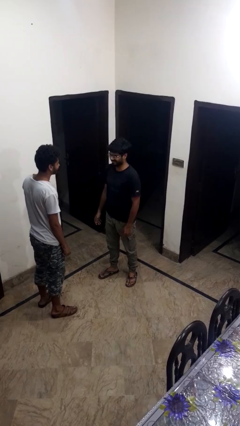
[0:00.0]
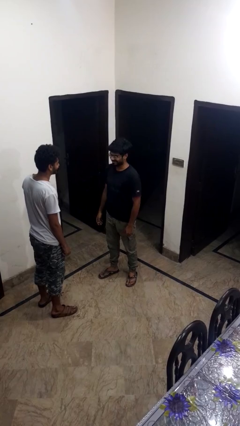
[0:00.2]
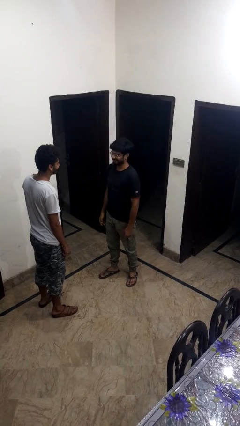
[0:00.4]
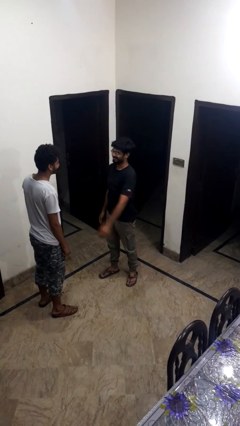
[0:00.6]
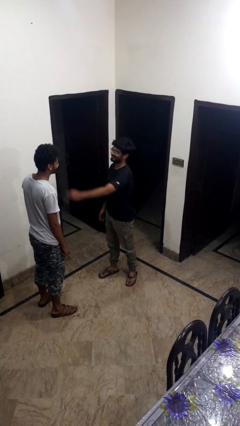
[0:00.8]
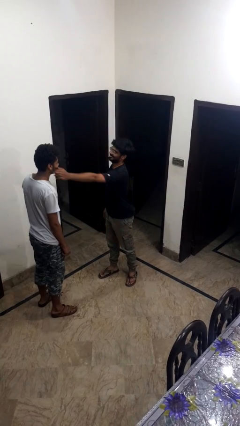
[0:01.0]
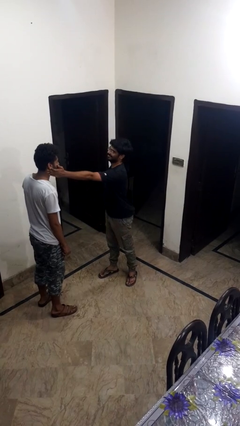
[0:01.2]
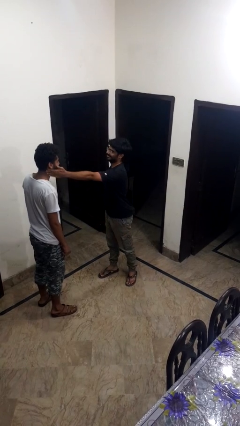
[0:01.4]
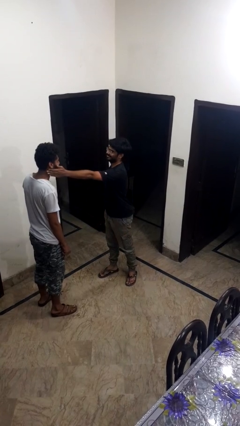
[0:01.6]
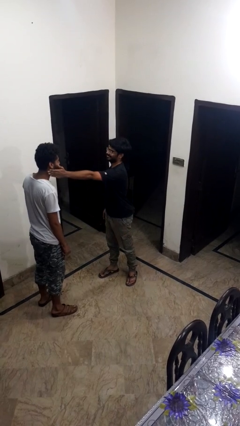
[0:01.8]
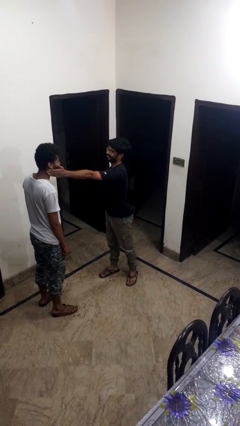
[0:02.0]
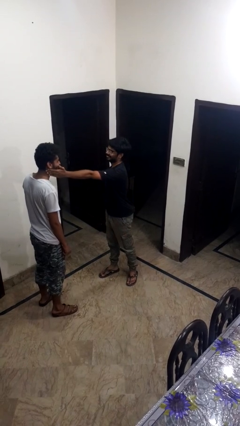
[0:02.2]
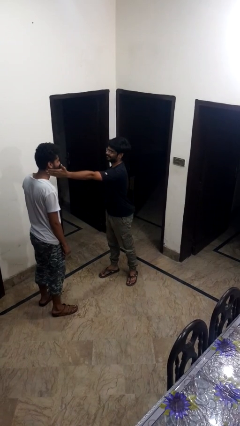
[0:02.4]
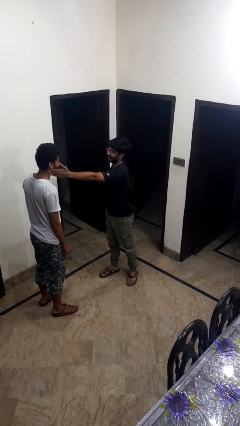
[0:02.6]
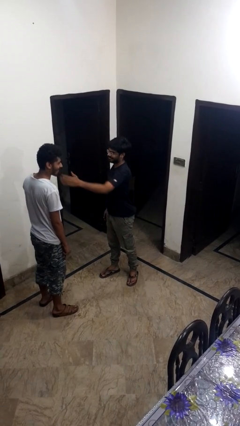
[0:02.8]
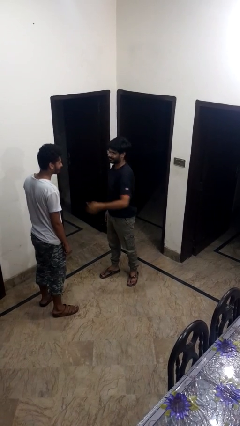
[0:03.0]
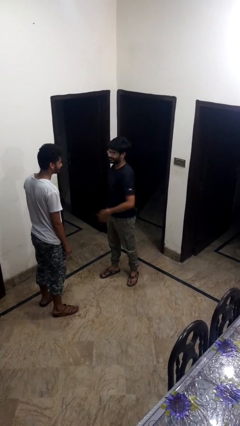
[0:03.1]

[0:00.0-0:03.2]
person touches face of person

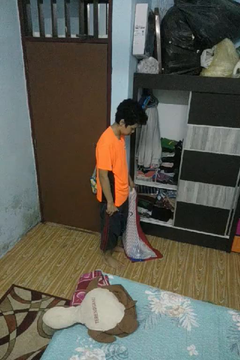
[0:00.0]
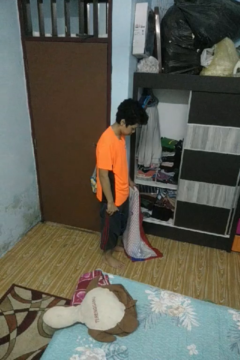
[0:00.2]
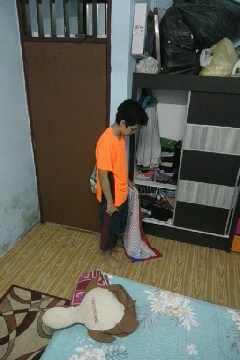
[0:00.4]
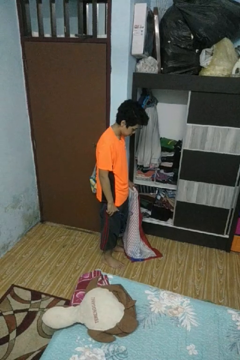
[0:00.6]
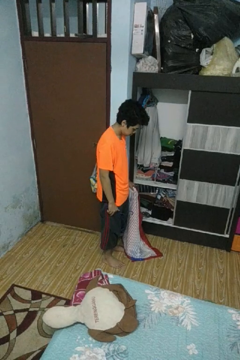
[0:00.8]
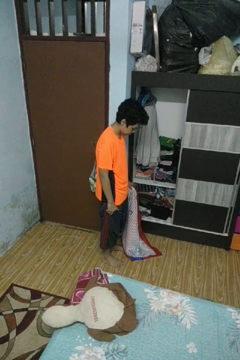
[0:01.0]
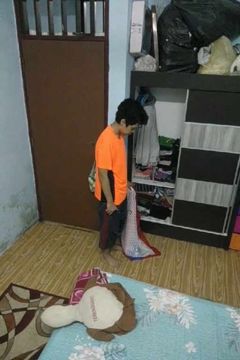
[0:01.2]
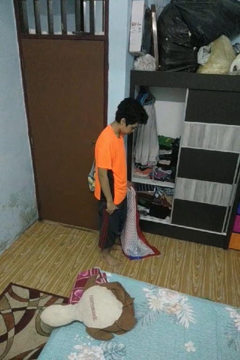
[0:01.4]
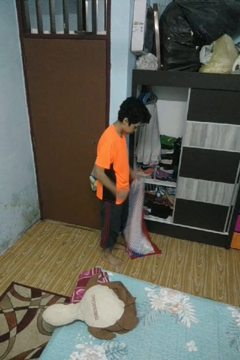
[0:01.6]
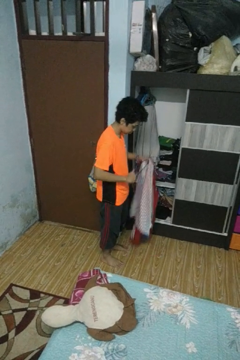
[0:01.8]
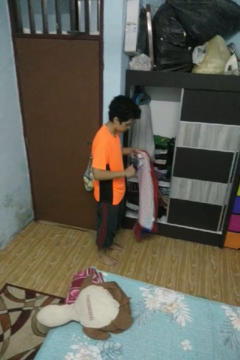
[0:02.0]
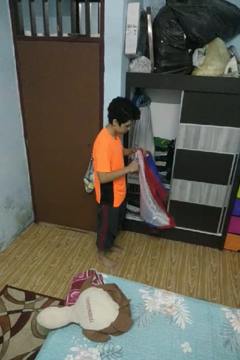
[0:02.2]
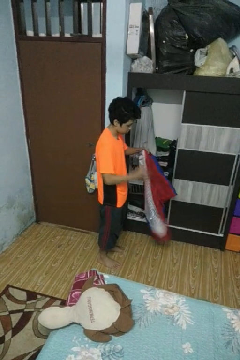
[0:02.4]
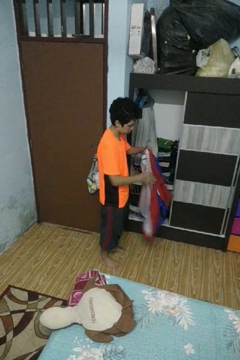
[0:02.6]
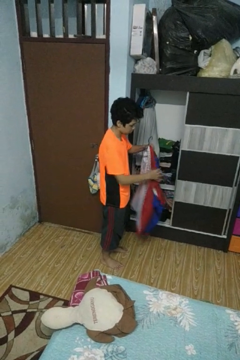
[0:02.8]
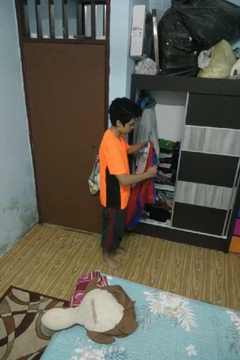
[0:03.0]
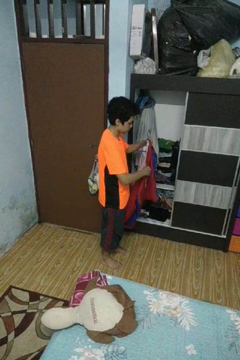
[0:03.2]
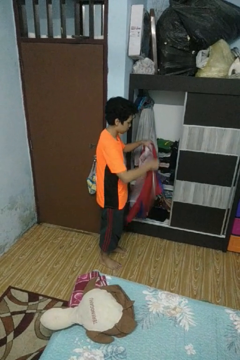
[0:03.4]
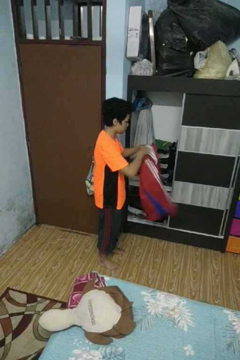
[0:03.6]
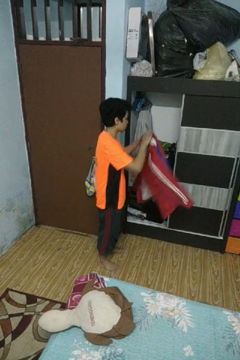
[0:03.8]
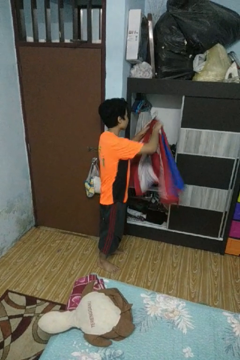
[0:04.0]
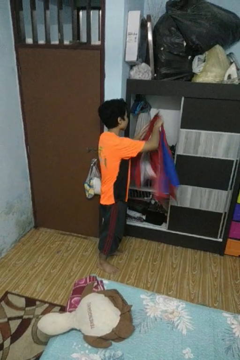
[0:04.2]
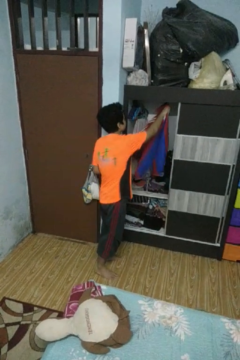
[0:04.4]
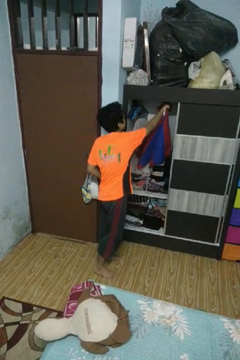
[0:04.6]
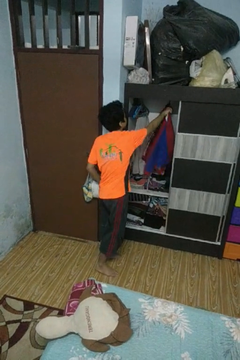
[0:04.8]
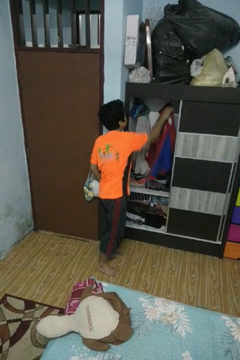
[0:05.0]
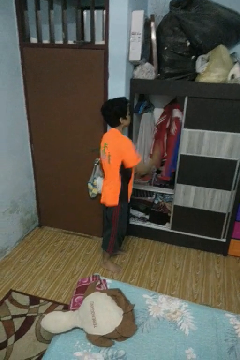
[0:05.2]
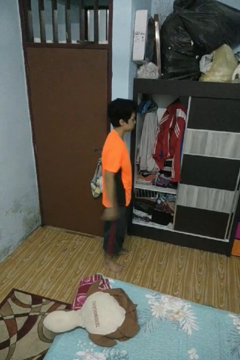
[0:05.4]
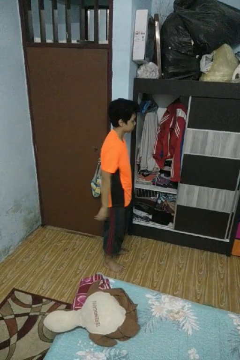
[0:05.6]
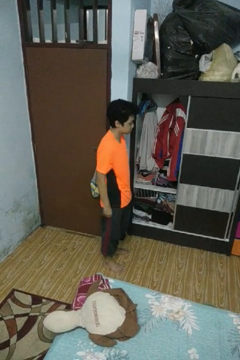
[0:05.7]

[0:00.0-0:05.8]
person puts clothes into closet

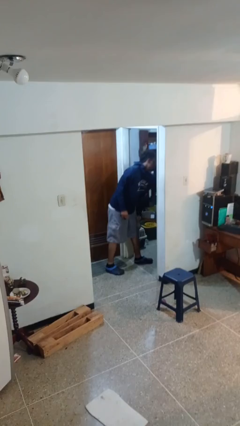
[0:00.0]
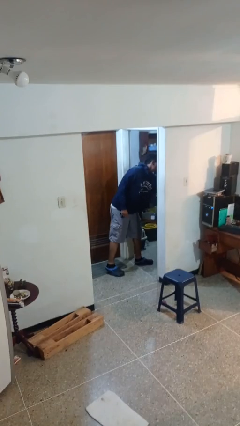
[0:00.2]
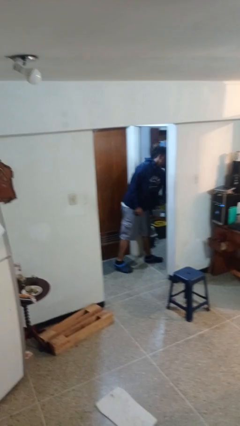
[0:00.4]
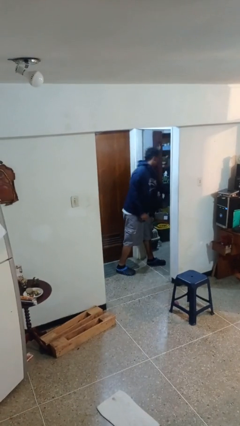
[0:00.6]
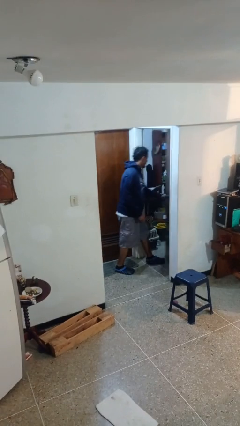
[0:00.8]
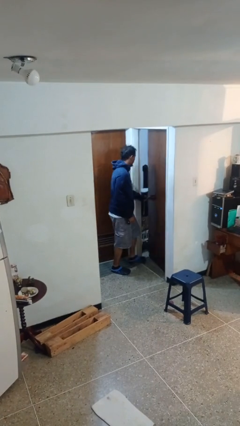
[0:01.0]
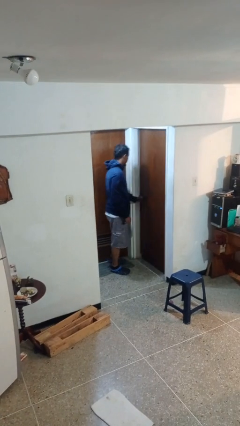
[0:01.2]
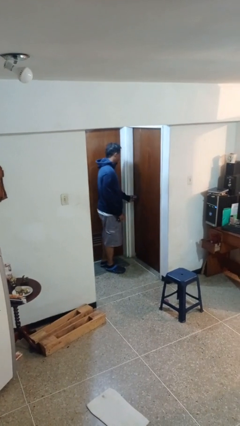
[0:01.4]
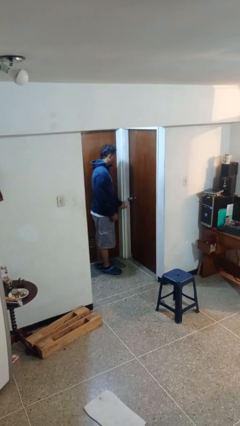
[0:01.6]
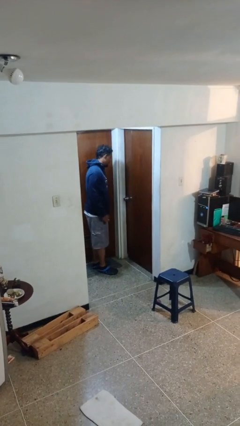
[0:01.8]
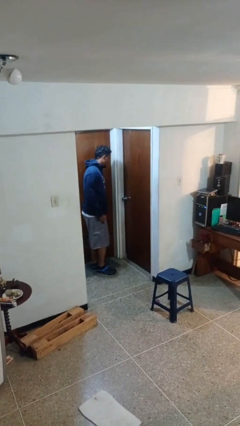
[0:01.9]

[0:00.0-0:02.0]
person closes facility door

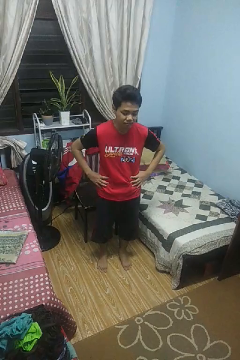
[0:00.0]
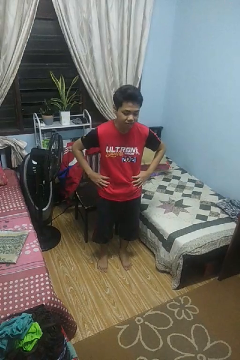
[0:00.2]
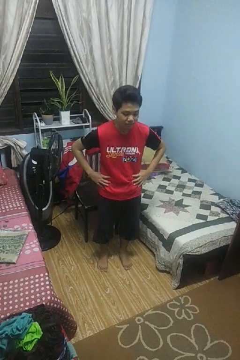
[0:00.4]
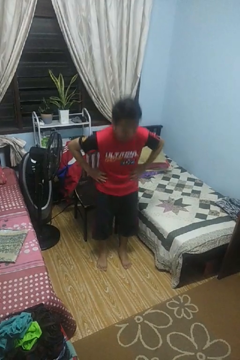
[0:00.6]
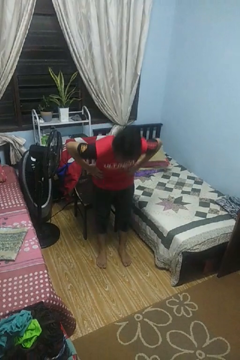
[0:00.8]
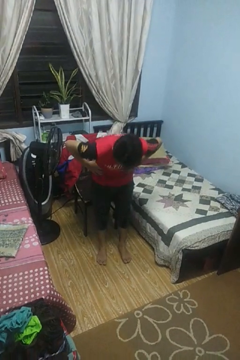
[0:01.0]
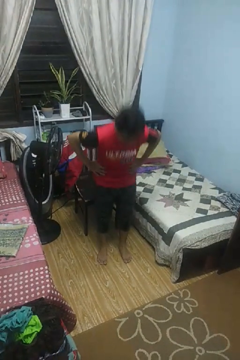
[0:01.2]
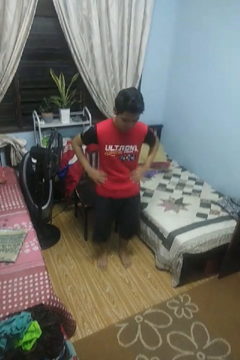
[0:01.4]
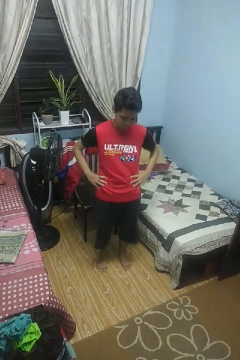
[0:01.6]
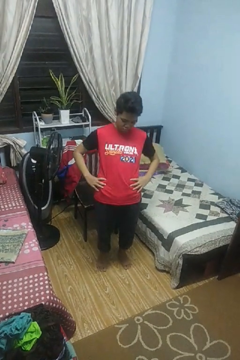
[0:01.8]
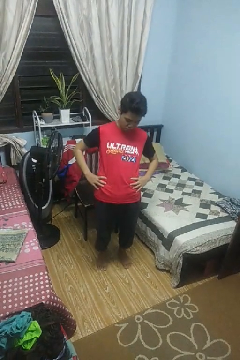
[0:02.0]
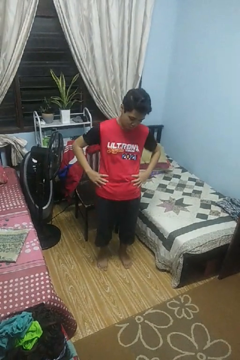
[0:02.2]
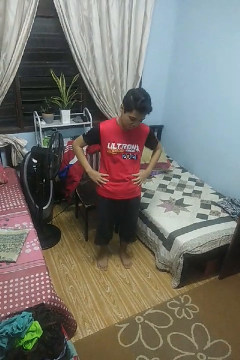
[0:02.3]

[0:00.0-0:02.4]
person wiggles hips

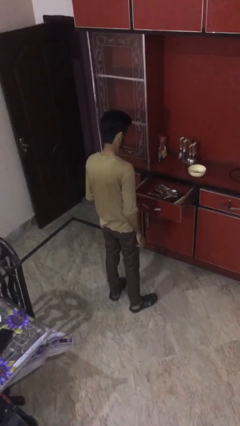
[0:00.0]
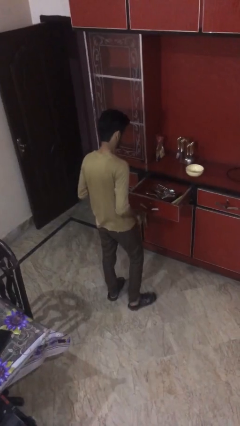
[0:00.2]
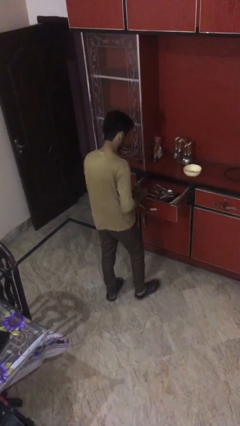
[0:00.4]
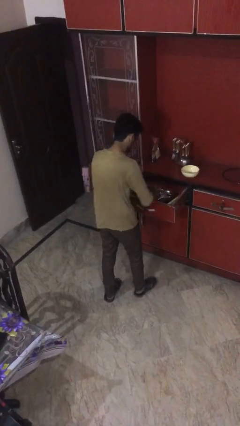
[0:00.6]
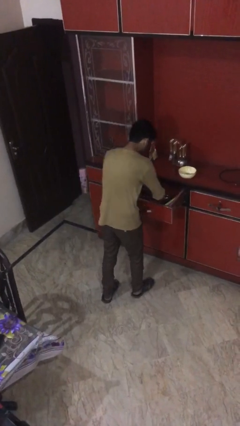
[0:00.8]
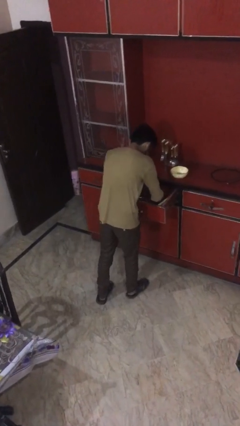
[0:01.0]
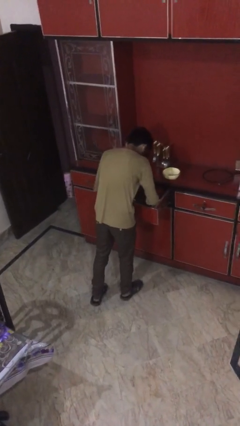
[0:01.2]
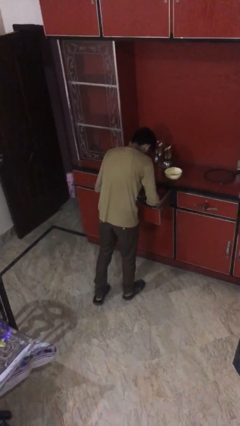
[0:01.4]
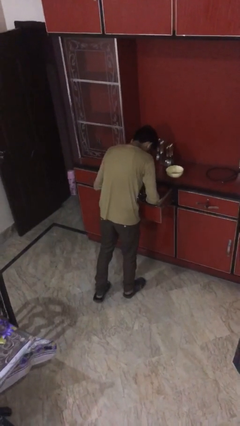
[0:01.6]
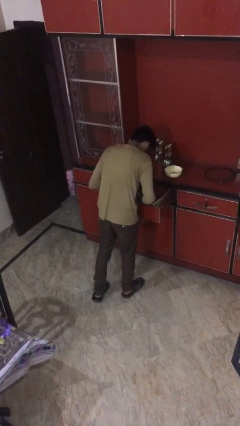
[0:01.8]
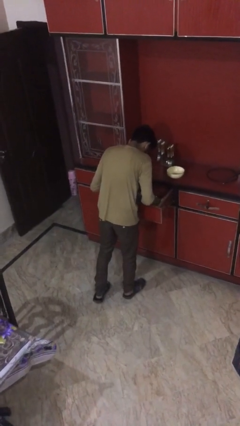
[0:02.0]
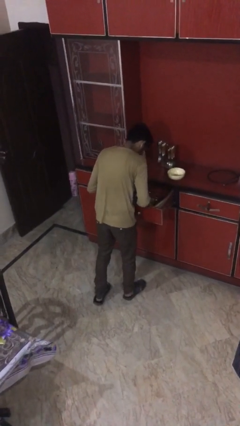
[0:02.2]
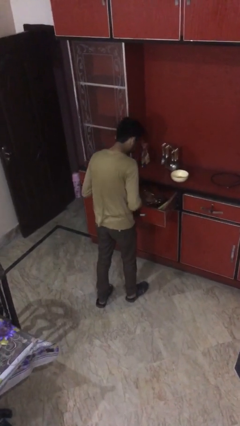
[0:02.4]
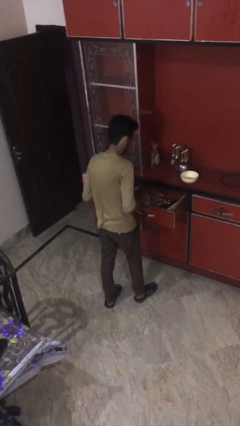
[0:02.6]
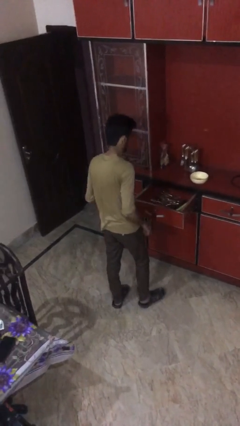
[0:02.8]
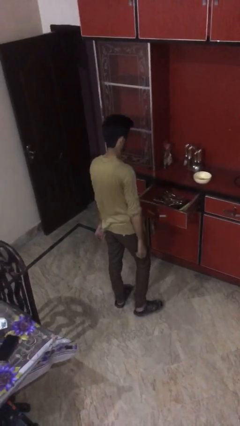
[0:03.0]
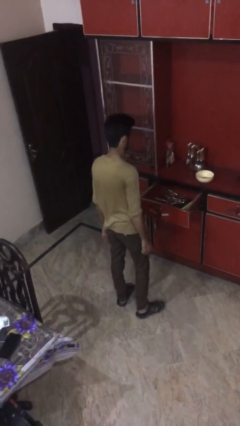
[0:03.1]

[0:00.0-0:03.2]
person searches in kitchen drawer

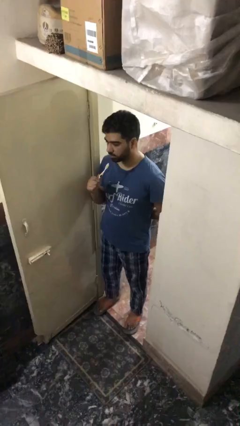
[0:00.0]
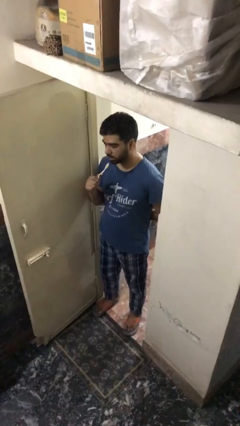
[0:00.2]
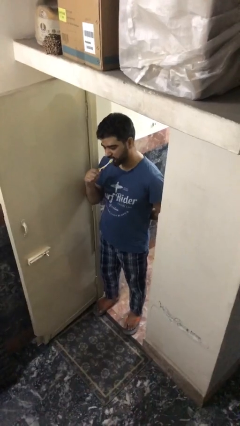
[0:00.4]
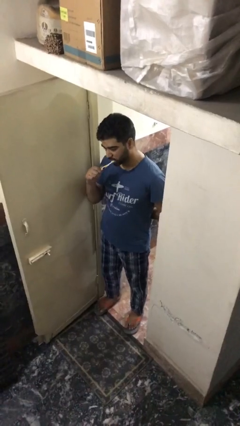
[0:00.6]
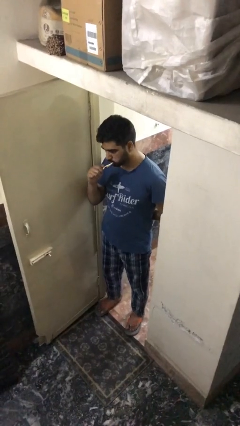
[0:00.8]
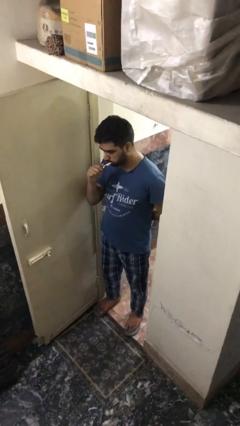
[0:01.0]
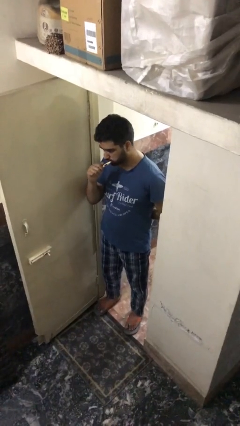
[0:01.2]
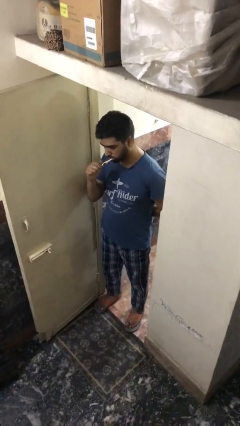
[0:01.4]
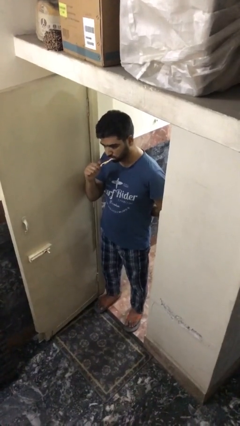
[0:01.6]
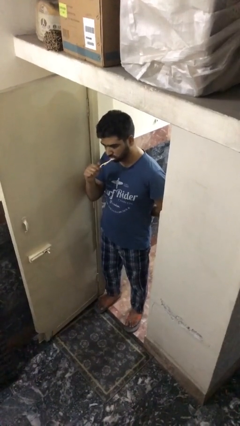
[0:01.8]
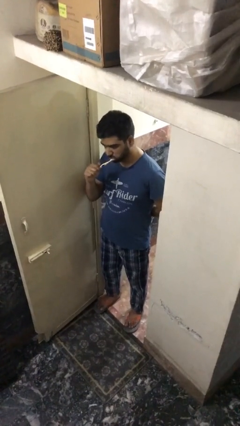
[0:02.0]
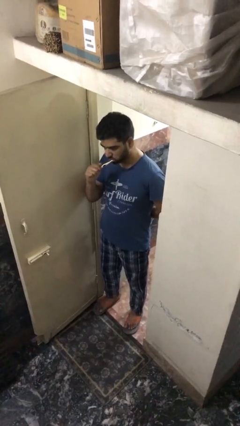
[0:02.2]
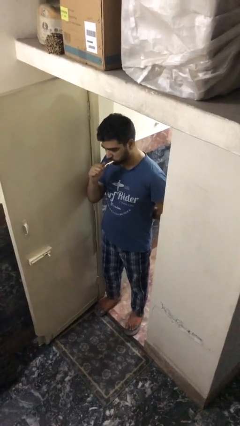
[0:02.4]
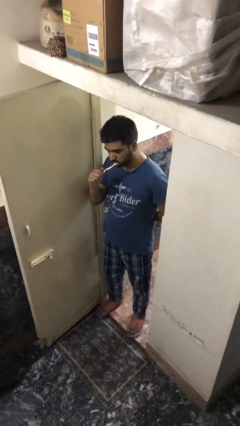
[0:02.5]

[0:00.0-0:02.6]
person brushes teeth
